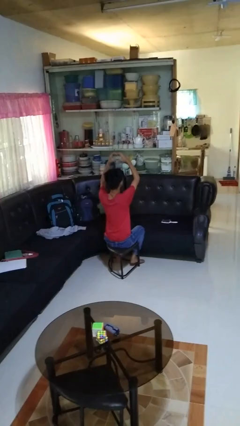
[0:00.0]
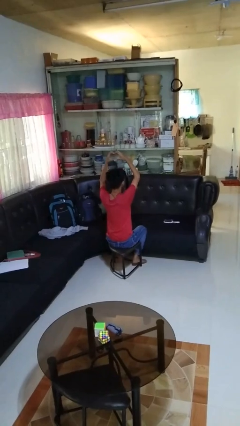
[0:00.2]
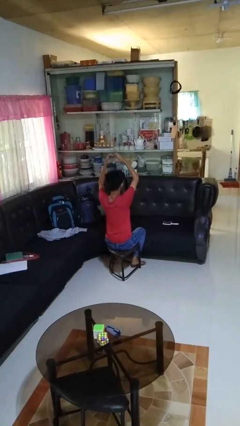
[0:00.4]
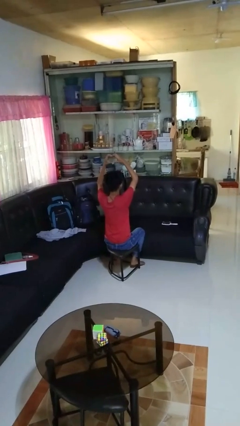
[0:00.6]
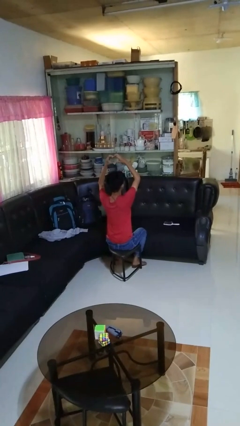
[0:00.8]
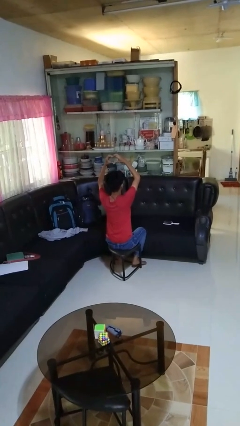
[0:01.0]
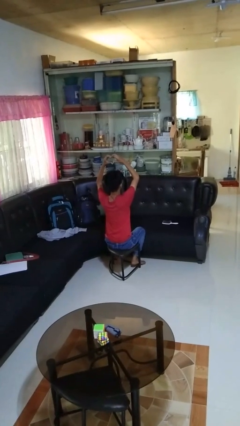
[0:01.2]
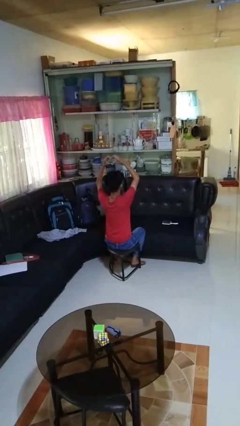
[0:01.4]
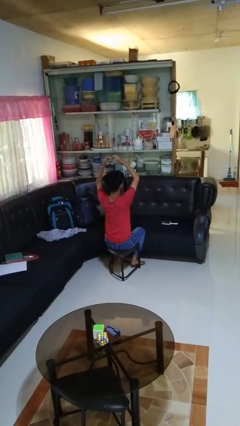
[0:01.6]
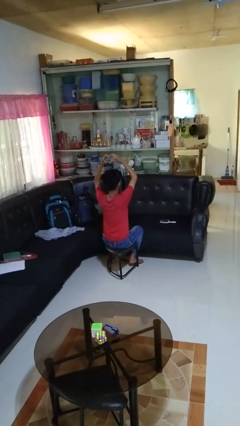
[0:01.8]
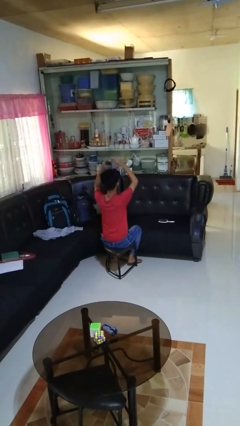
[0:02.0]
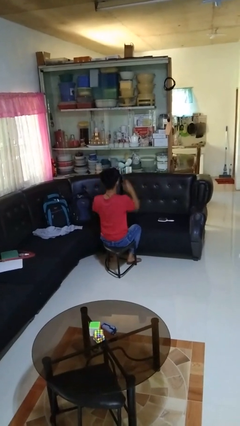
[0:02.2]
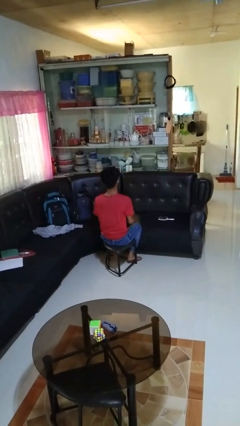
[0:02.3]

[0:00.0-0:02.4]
person gestures heart

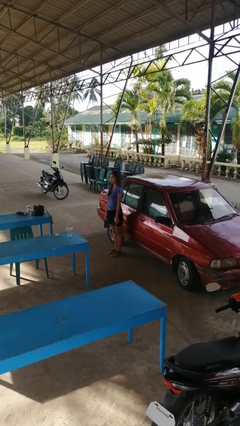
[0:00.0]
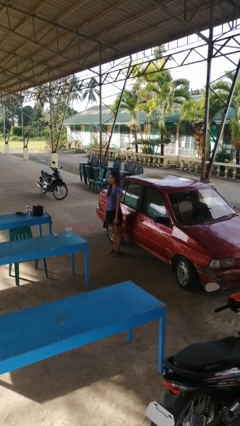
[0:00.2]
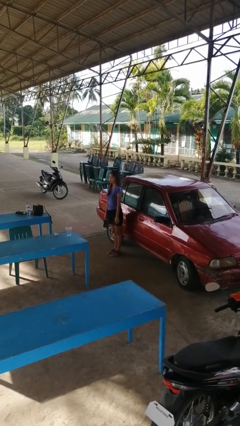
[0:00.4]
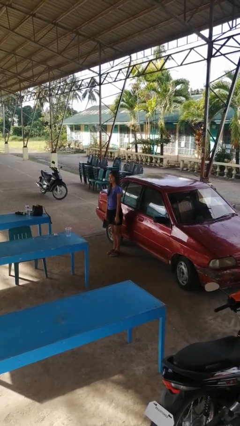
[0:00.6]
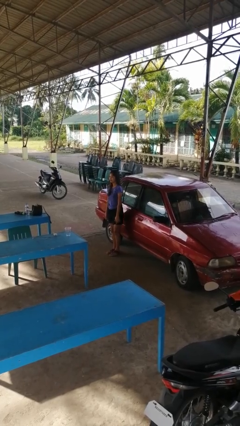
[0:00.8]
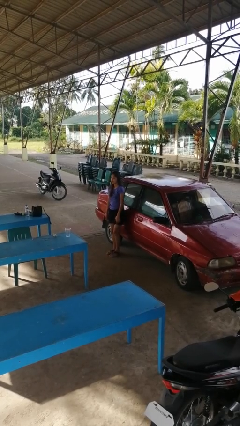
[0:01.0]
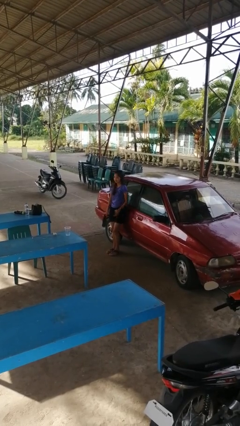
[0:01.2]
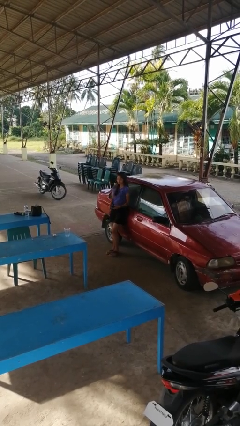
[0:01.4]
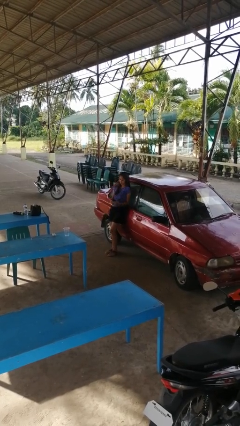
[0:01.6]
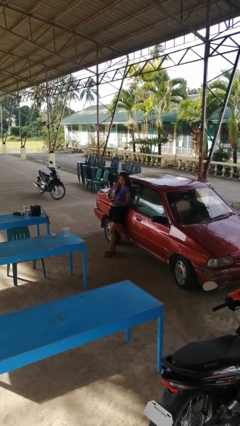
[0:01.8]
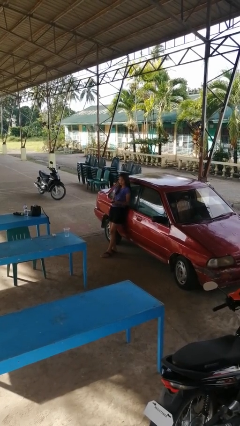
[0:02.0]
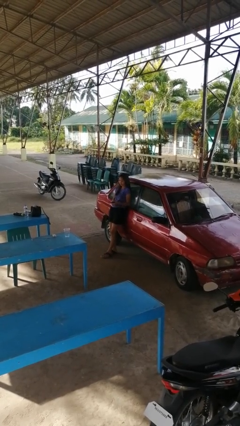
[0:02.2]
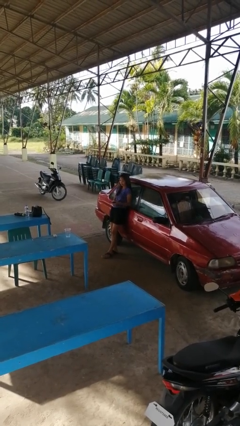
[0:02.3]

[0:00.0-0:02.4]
person leans against car

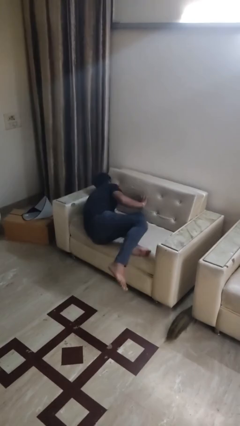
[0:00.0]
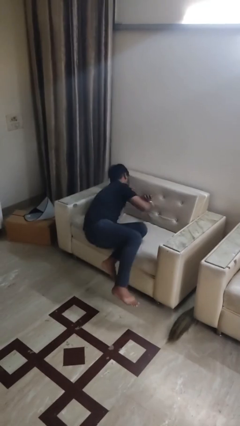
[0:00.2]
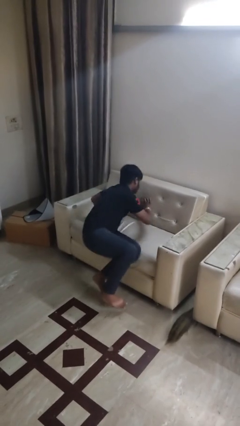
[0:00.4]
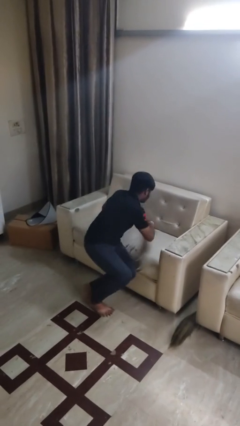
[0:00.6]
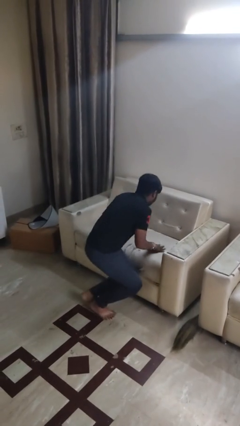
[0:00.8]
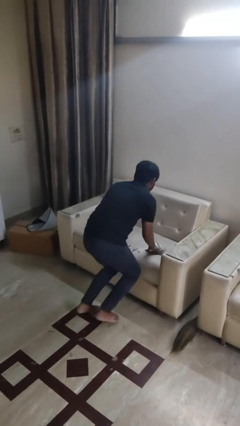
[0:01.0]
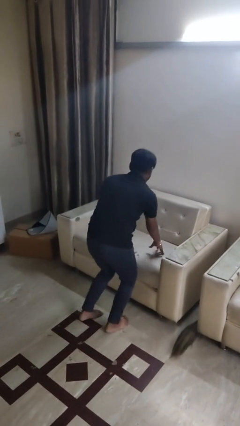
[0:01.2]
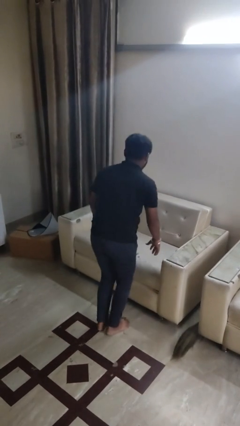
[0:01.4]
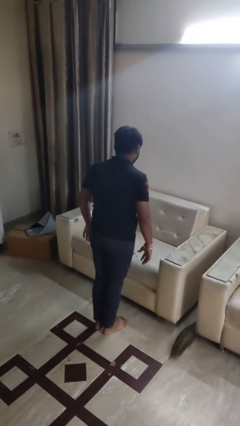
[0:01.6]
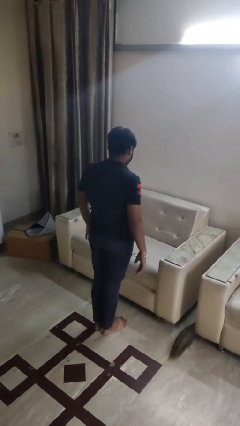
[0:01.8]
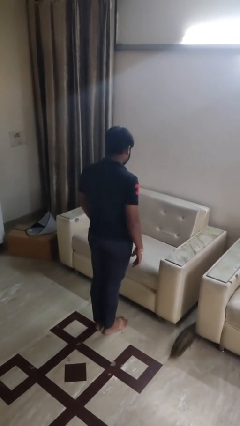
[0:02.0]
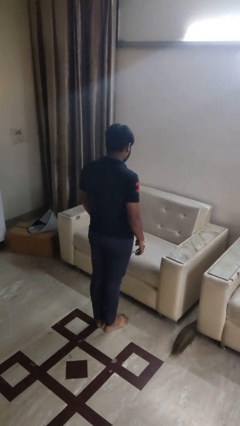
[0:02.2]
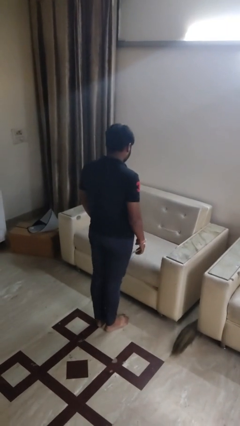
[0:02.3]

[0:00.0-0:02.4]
person stands up

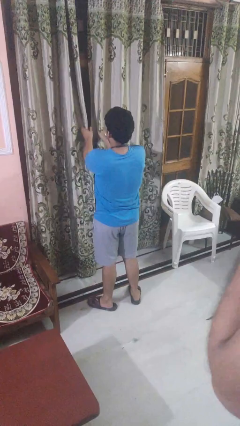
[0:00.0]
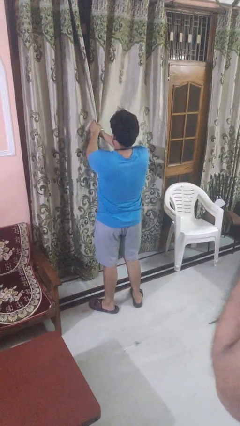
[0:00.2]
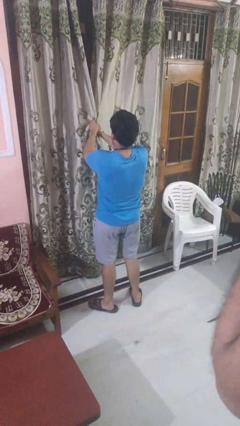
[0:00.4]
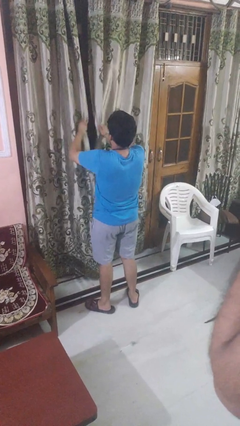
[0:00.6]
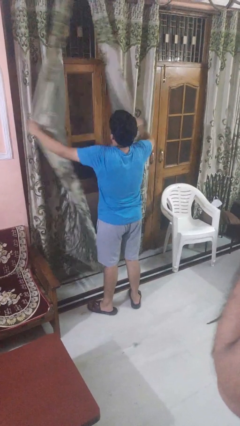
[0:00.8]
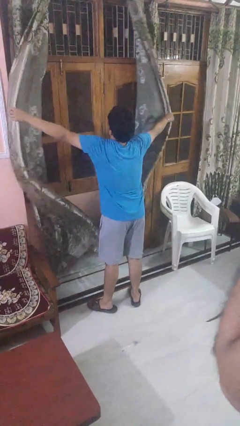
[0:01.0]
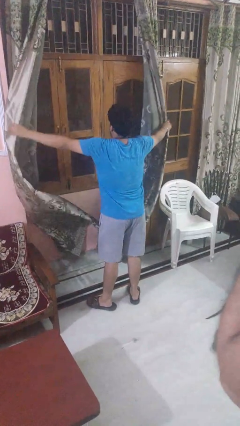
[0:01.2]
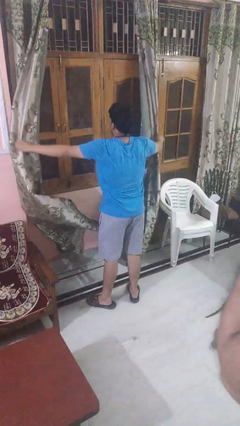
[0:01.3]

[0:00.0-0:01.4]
person opens curtains

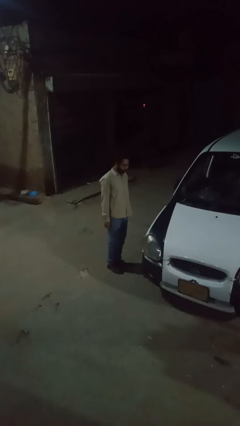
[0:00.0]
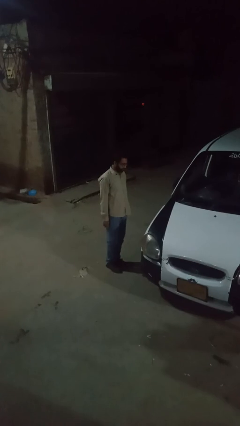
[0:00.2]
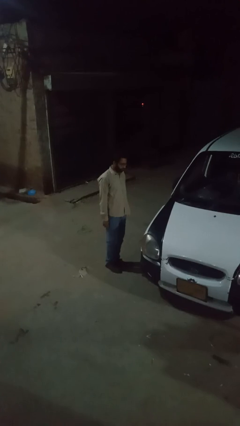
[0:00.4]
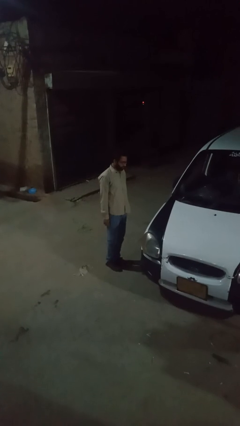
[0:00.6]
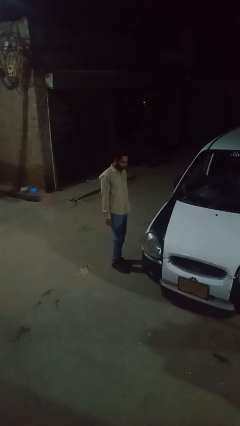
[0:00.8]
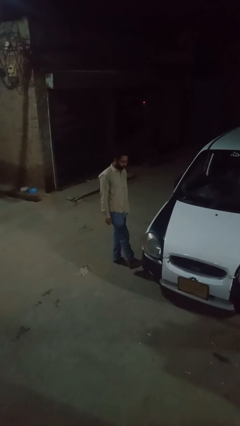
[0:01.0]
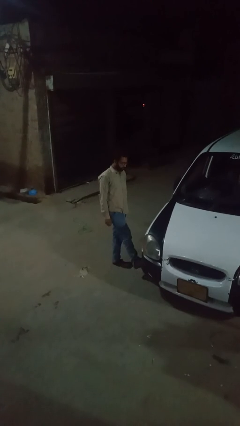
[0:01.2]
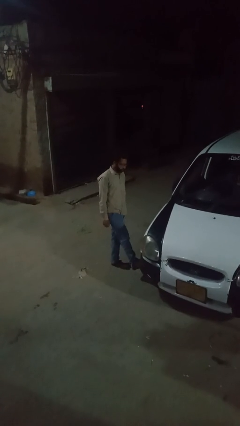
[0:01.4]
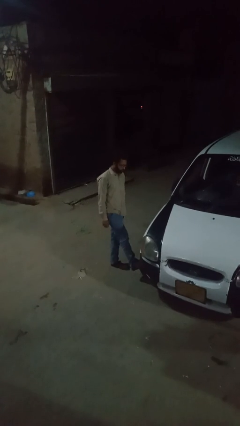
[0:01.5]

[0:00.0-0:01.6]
person kicks car tires

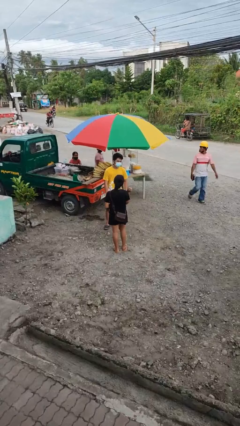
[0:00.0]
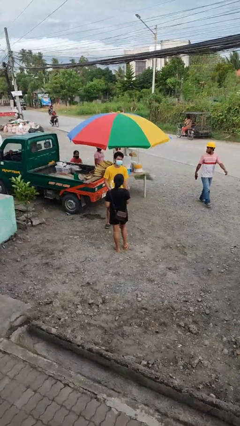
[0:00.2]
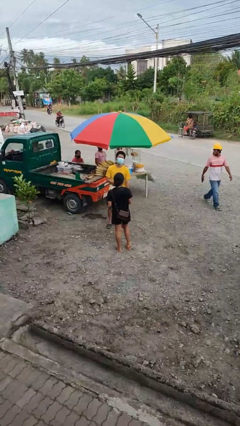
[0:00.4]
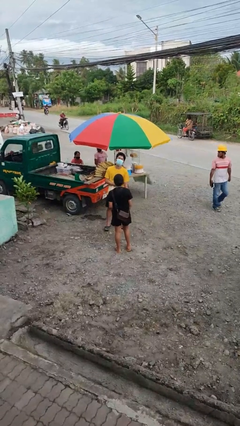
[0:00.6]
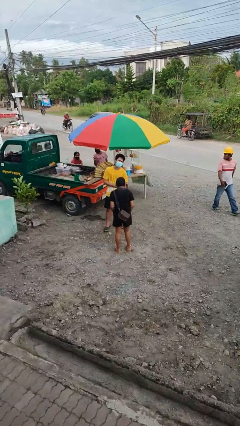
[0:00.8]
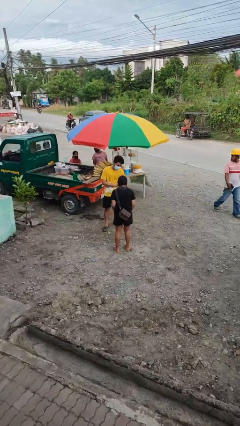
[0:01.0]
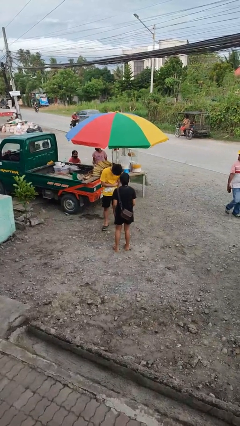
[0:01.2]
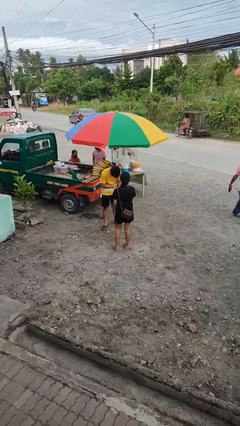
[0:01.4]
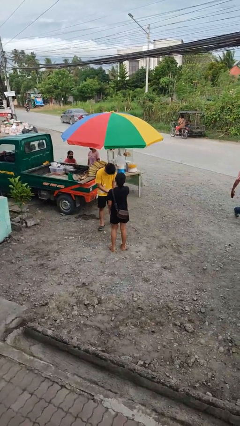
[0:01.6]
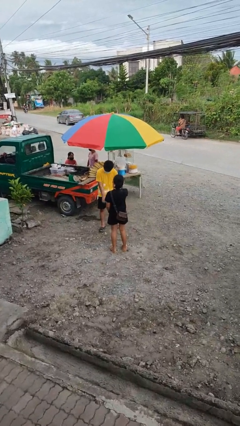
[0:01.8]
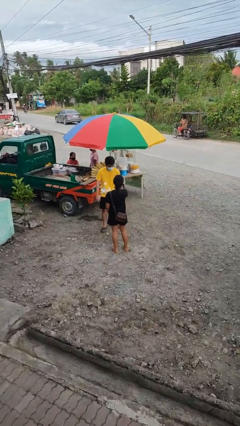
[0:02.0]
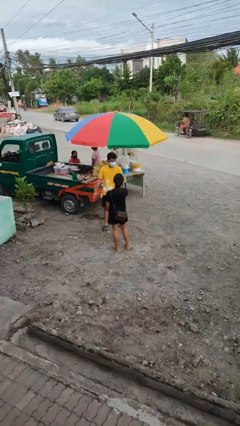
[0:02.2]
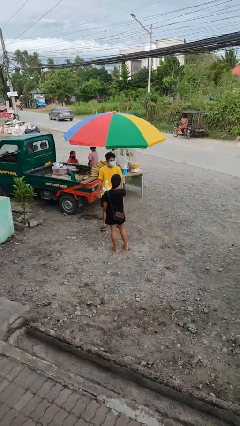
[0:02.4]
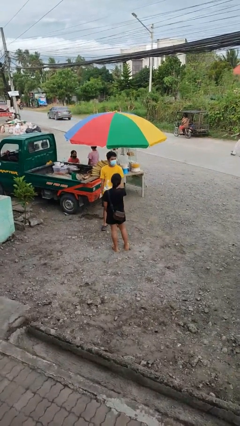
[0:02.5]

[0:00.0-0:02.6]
person laughs with person

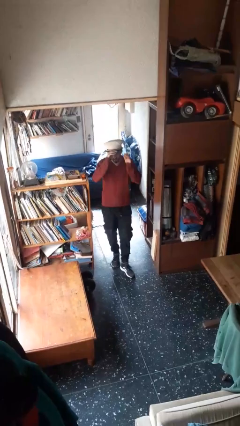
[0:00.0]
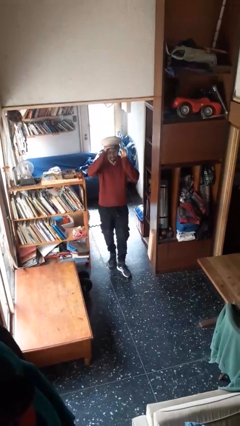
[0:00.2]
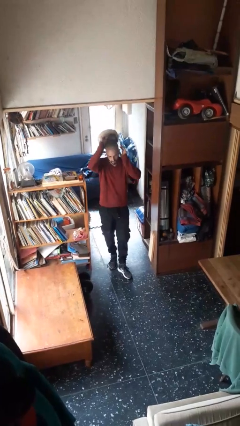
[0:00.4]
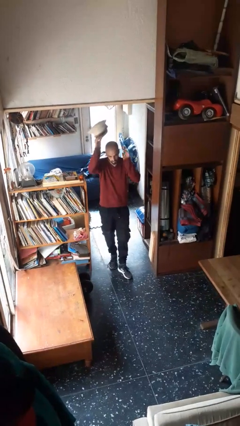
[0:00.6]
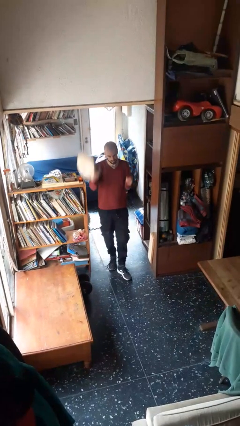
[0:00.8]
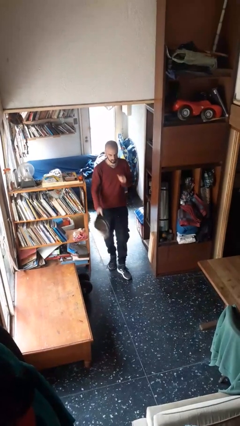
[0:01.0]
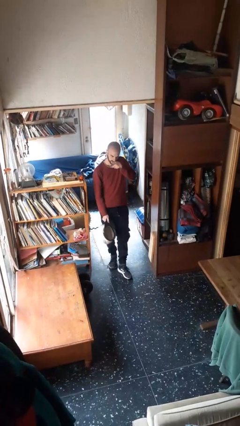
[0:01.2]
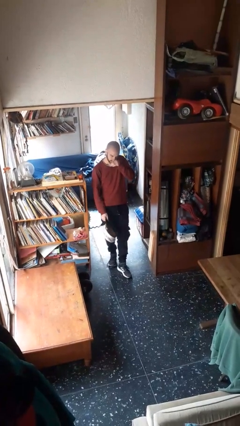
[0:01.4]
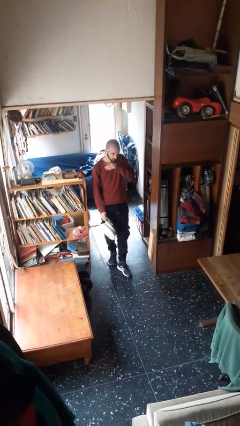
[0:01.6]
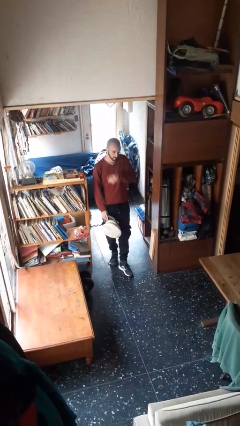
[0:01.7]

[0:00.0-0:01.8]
person takes off hat

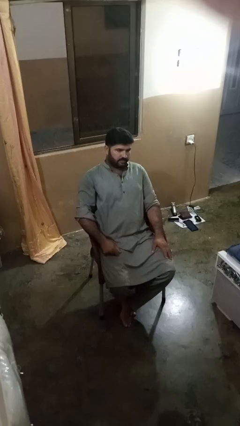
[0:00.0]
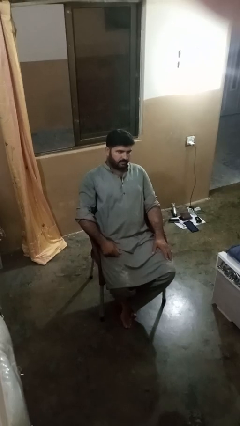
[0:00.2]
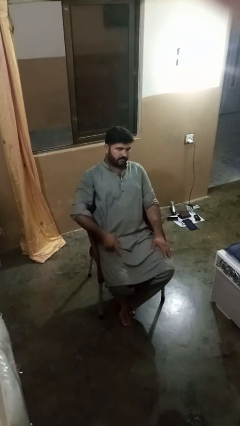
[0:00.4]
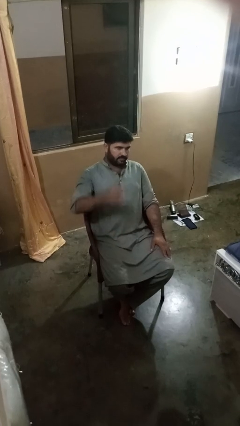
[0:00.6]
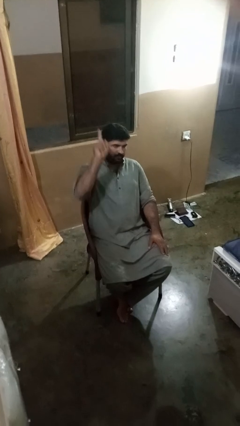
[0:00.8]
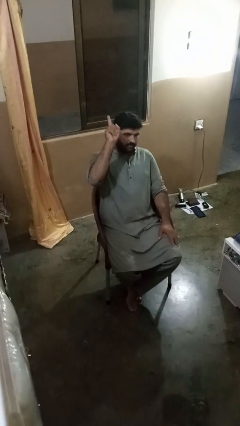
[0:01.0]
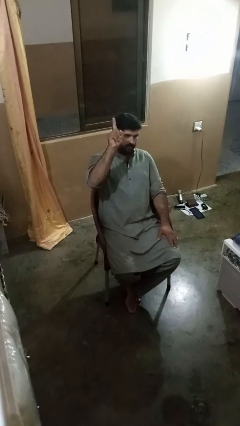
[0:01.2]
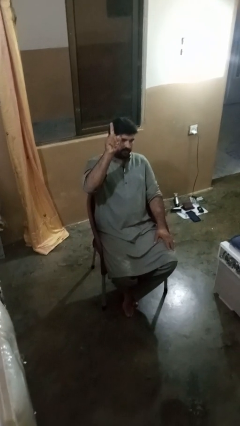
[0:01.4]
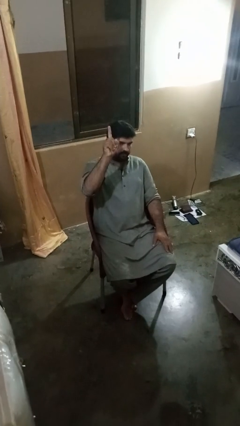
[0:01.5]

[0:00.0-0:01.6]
person gestures number one

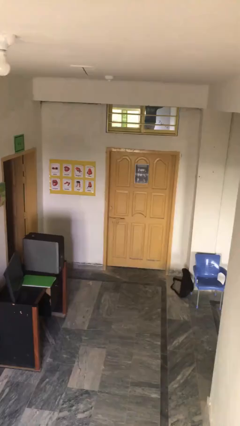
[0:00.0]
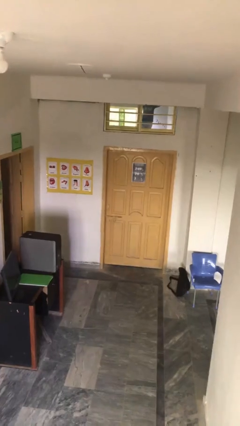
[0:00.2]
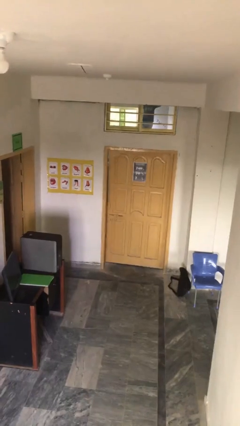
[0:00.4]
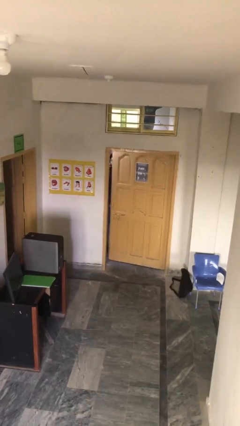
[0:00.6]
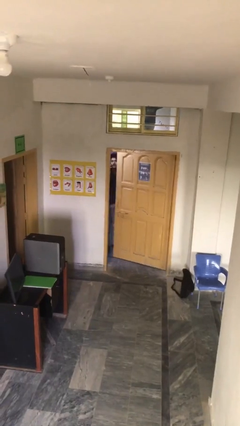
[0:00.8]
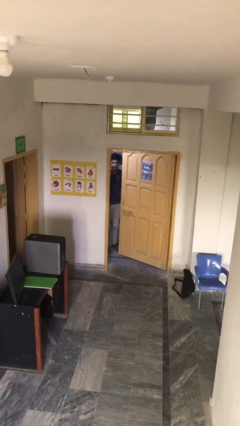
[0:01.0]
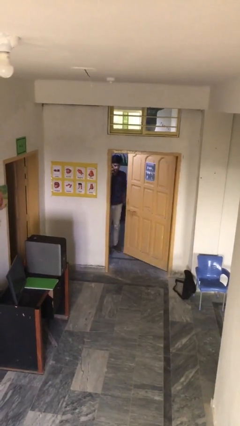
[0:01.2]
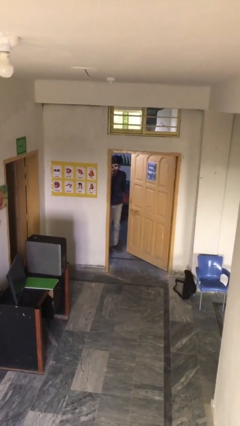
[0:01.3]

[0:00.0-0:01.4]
person opens facility door
